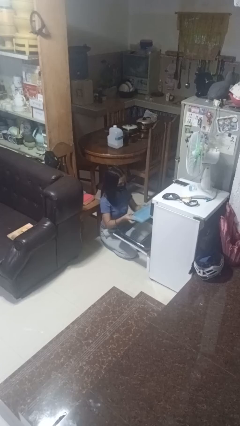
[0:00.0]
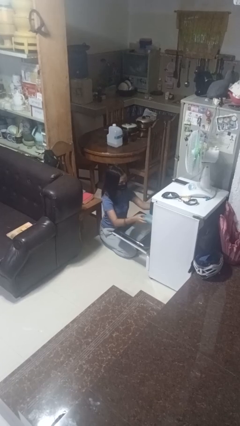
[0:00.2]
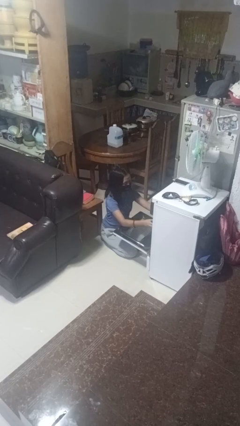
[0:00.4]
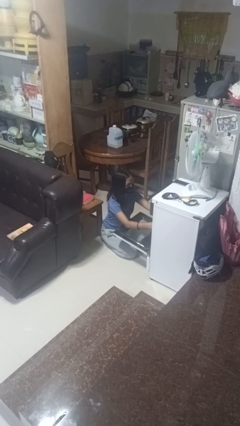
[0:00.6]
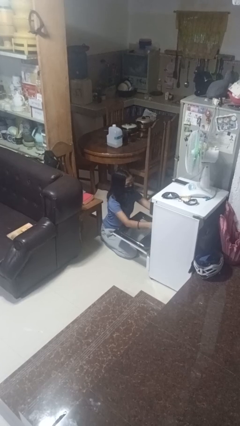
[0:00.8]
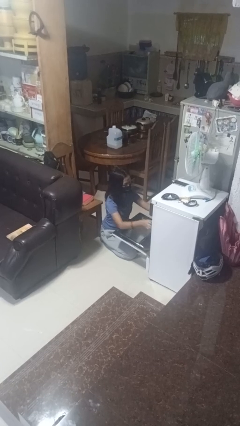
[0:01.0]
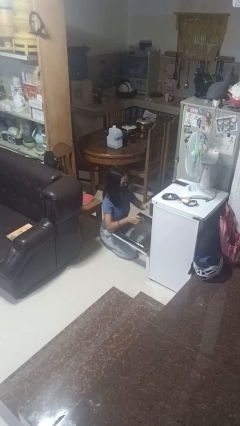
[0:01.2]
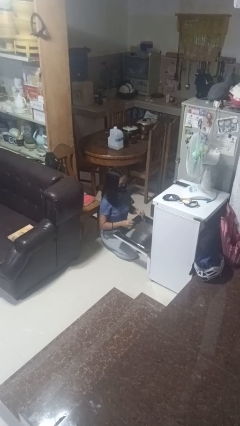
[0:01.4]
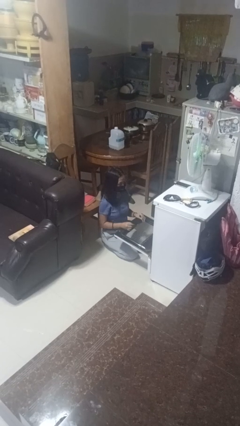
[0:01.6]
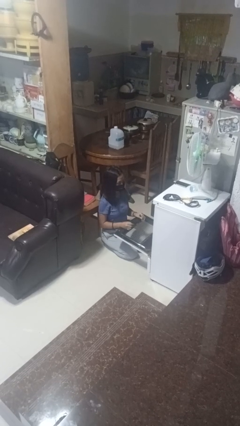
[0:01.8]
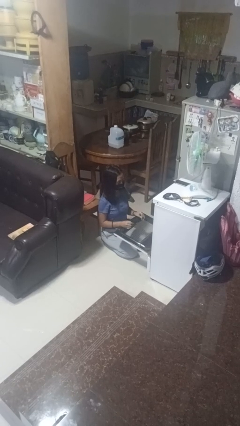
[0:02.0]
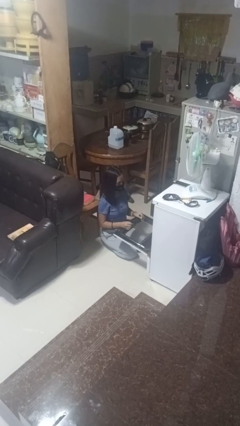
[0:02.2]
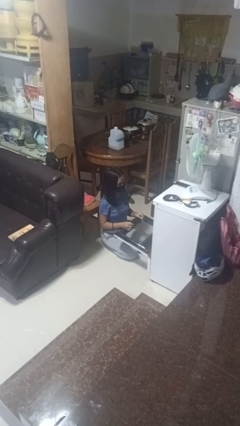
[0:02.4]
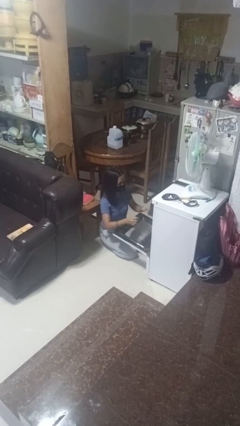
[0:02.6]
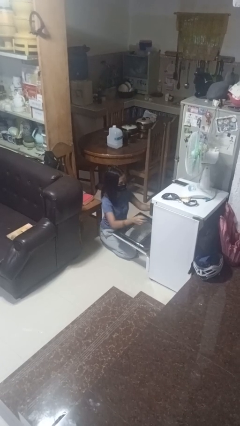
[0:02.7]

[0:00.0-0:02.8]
person puts object into oven

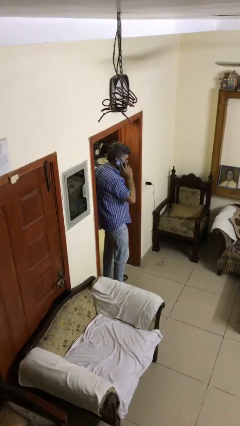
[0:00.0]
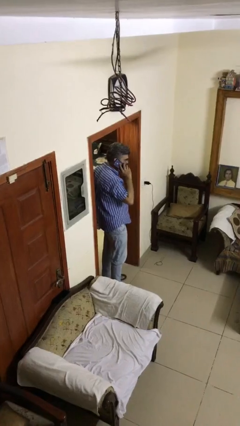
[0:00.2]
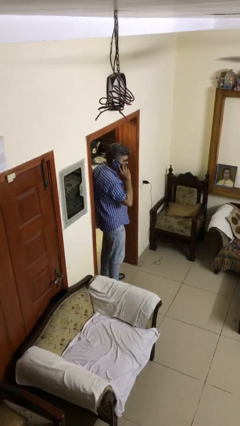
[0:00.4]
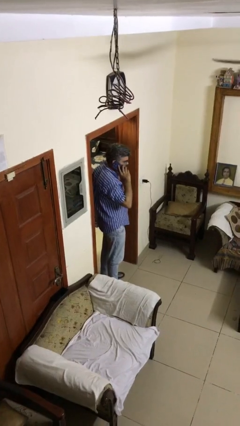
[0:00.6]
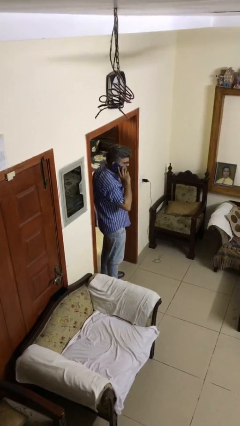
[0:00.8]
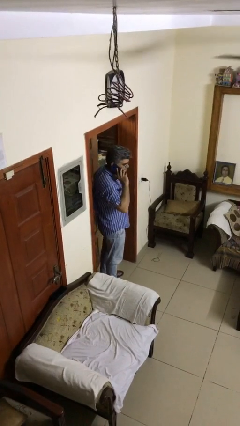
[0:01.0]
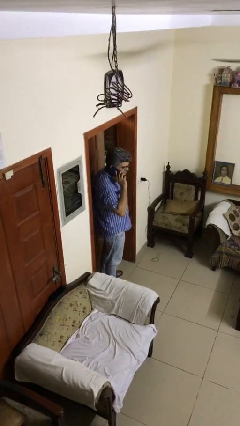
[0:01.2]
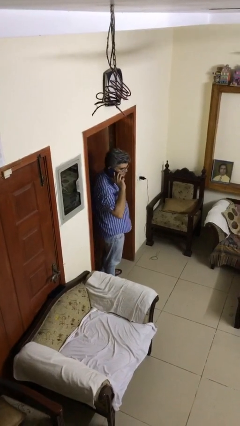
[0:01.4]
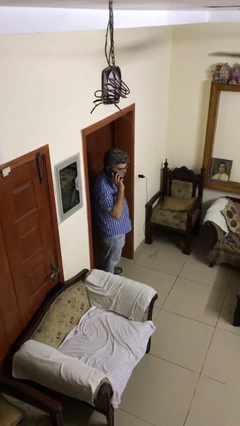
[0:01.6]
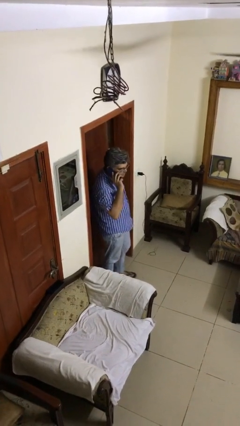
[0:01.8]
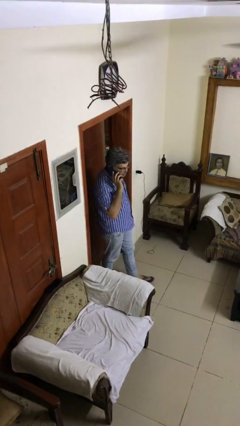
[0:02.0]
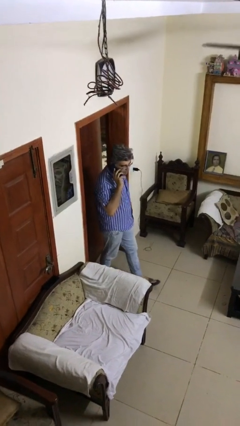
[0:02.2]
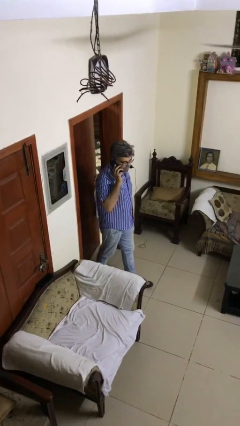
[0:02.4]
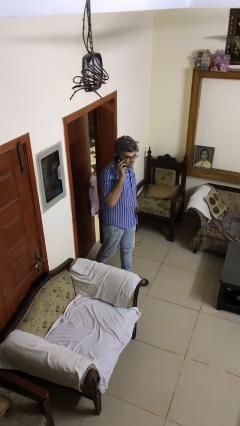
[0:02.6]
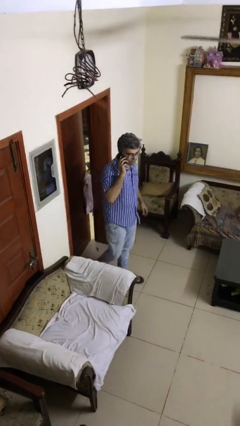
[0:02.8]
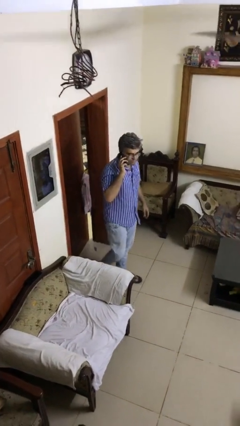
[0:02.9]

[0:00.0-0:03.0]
person closes facility door

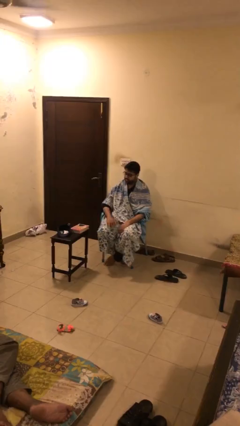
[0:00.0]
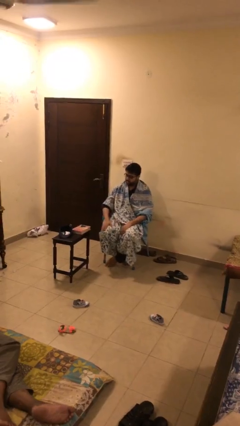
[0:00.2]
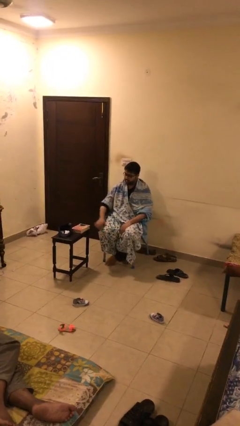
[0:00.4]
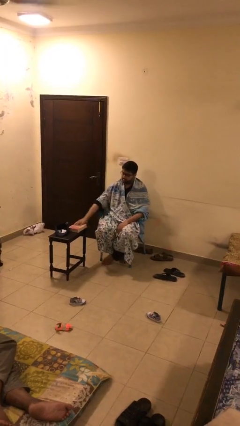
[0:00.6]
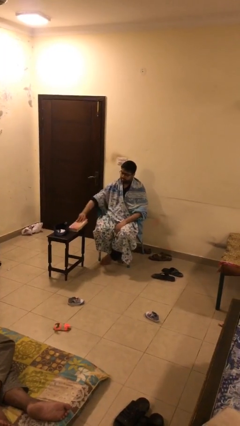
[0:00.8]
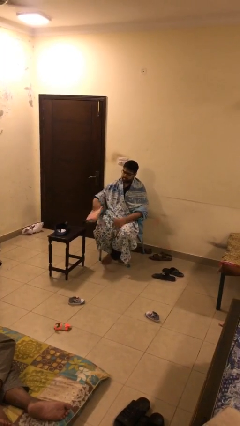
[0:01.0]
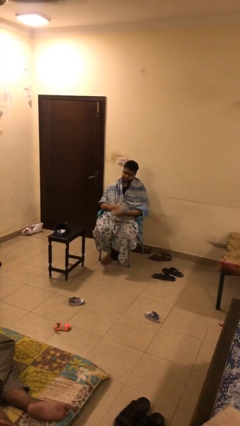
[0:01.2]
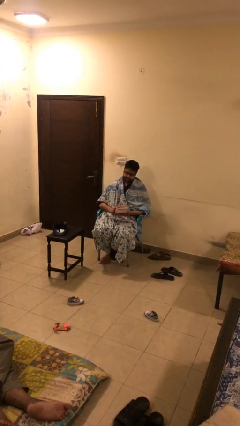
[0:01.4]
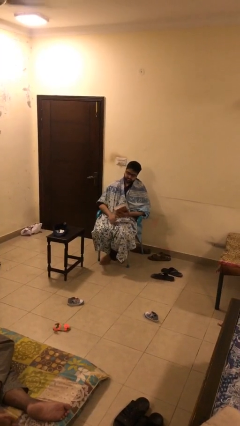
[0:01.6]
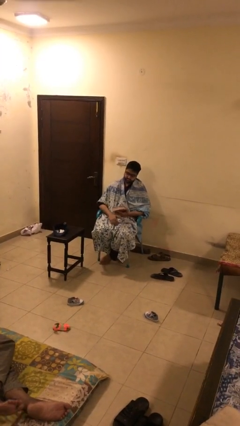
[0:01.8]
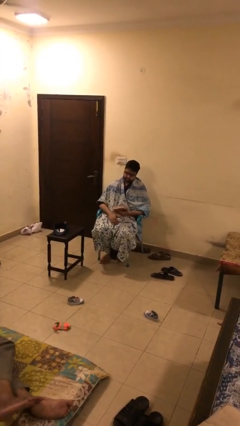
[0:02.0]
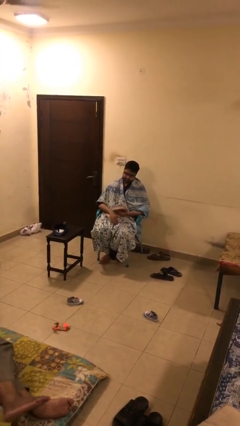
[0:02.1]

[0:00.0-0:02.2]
person picks up object from table

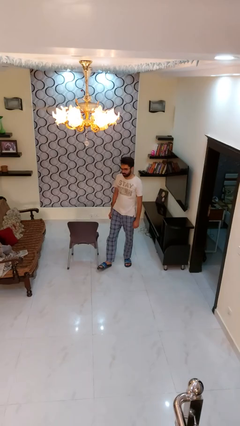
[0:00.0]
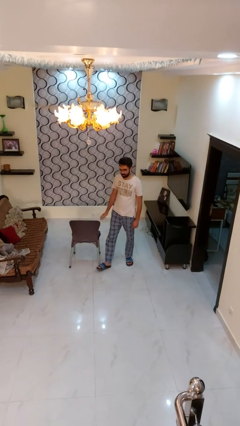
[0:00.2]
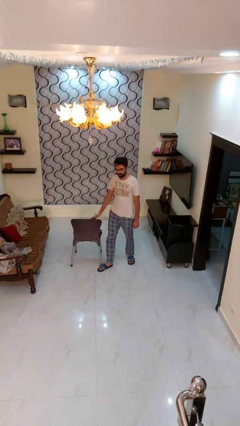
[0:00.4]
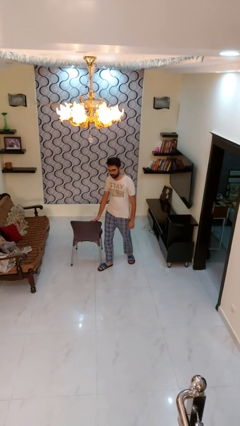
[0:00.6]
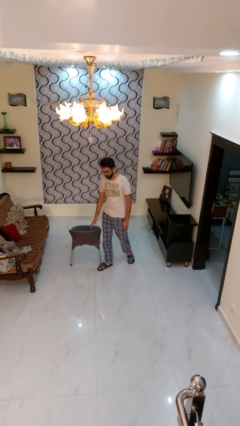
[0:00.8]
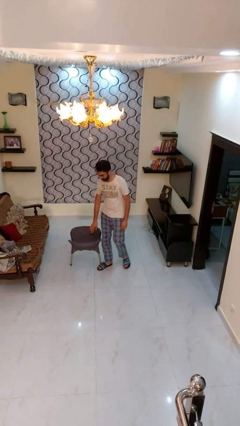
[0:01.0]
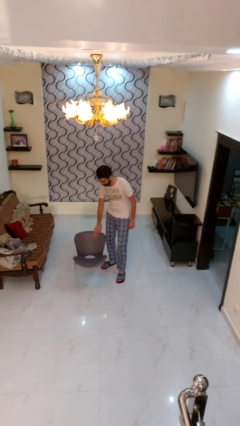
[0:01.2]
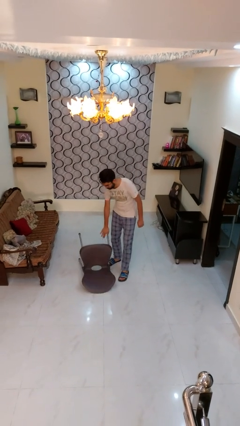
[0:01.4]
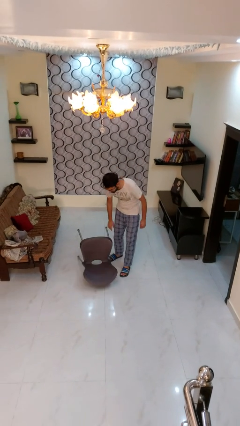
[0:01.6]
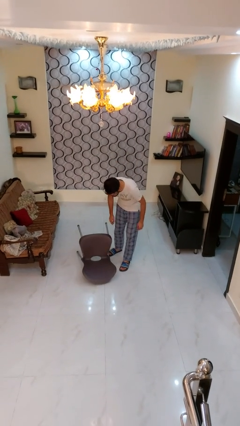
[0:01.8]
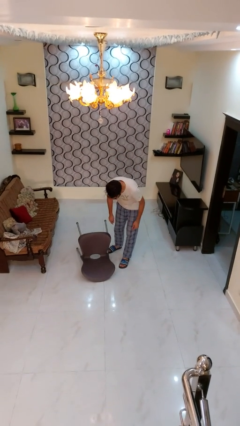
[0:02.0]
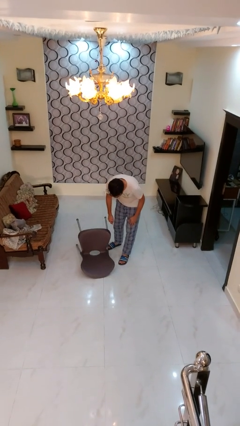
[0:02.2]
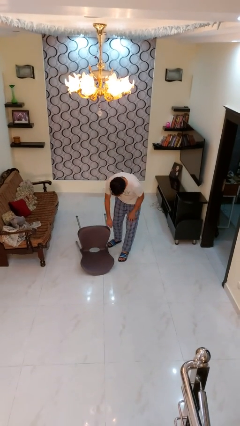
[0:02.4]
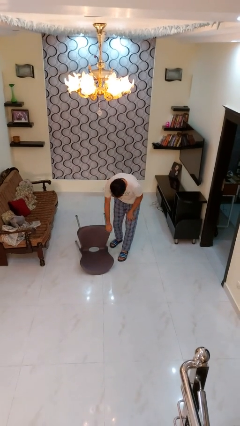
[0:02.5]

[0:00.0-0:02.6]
person knocks over furniture

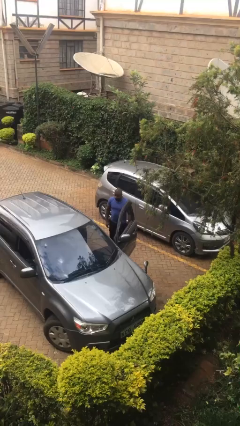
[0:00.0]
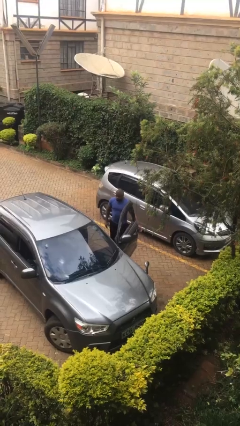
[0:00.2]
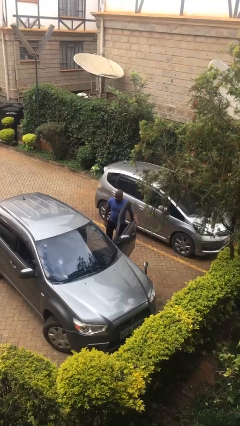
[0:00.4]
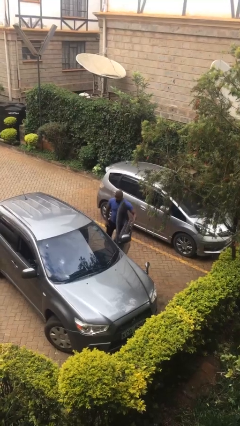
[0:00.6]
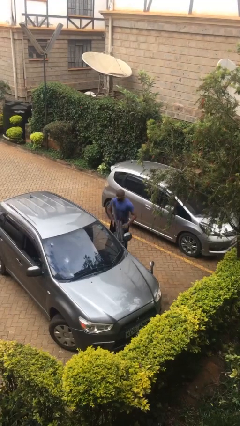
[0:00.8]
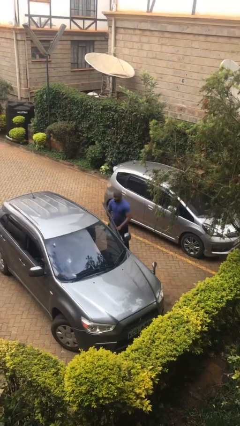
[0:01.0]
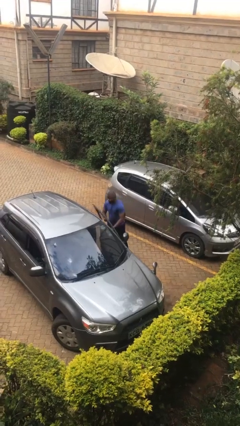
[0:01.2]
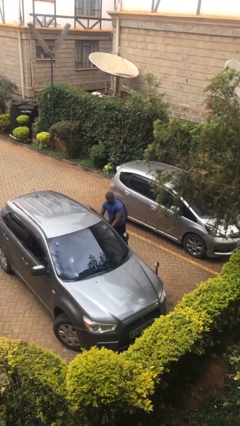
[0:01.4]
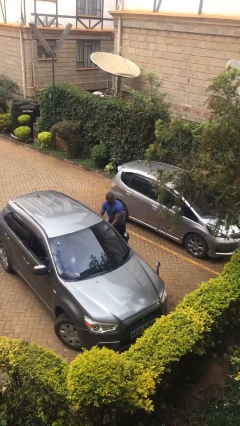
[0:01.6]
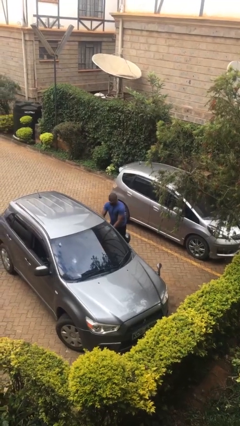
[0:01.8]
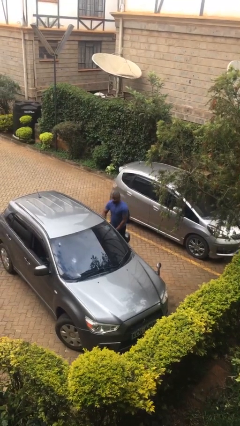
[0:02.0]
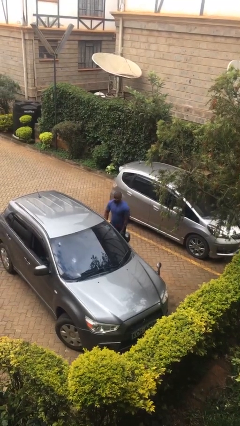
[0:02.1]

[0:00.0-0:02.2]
person closes car door

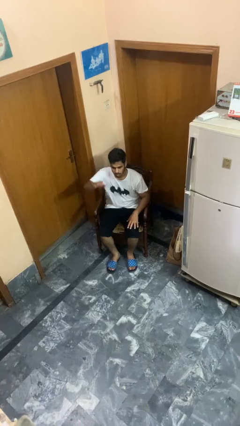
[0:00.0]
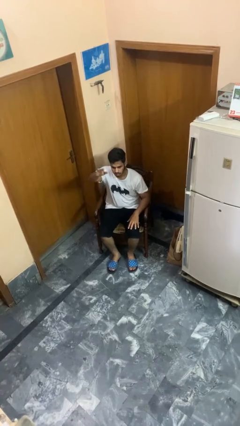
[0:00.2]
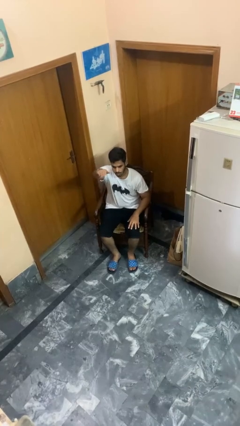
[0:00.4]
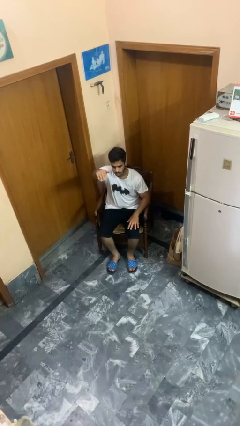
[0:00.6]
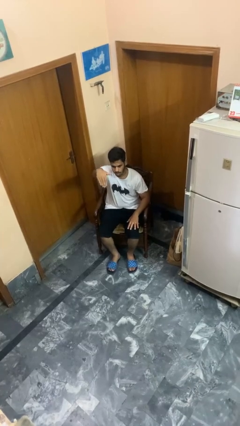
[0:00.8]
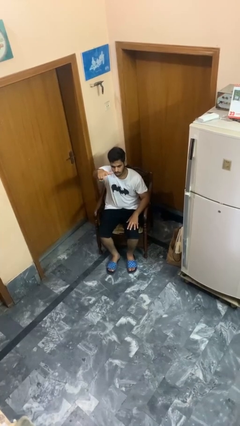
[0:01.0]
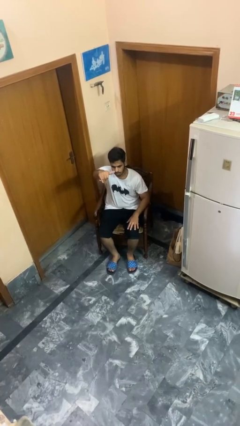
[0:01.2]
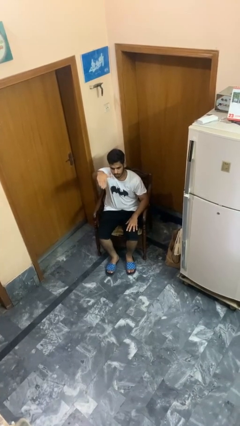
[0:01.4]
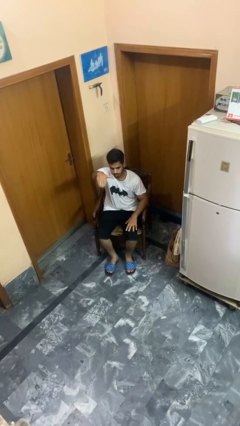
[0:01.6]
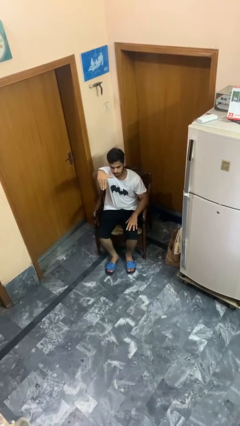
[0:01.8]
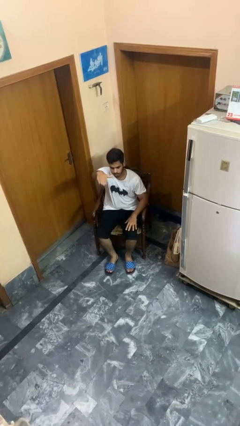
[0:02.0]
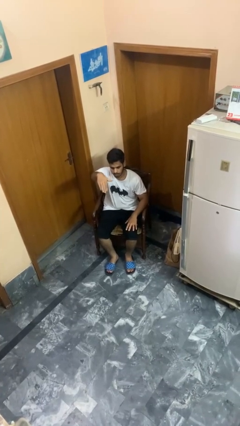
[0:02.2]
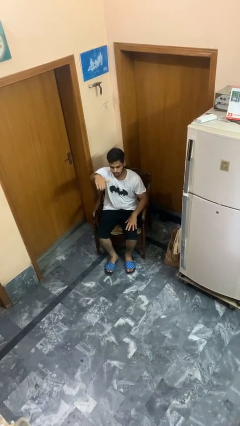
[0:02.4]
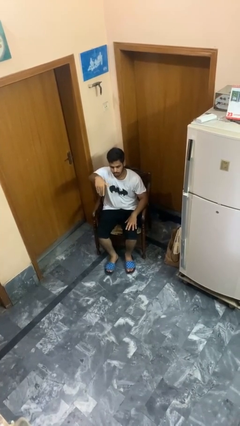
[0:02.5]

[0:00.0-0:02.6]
person gestures come here

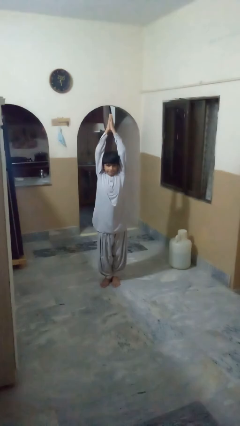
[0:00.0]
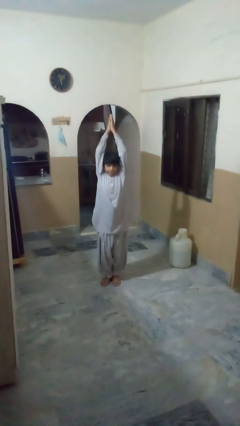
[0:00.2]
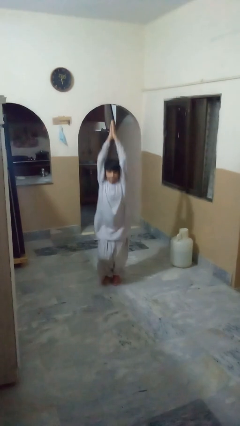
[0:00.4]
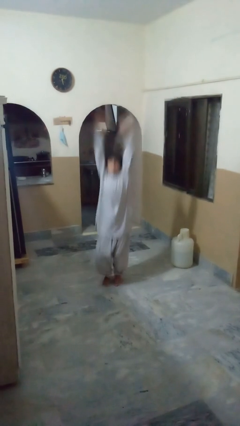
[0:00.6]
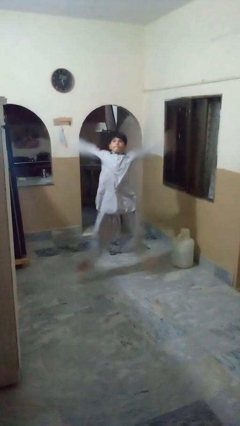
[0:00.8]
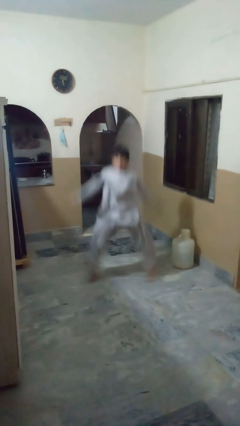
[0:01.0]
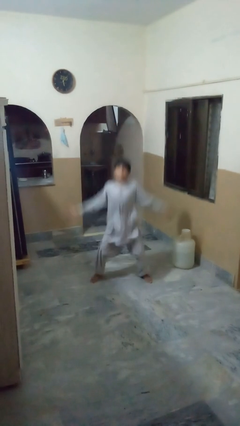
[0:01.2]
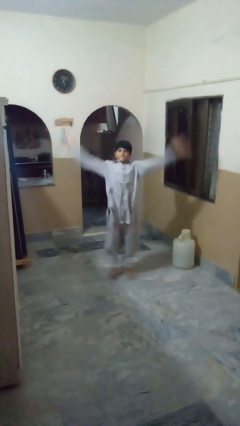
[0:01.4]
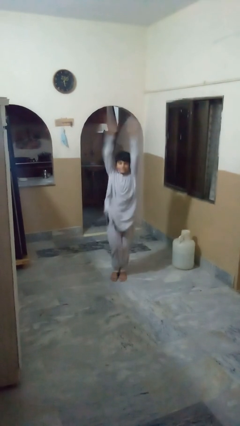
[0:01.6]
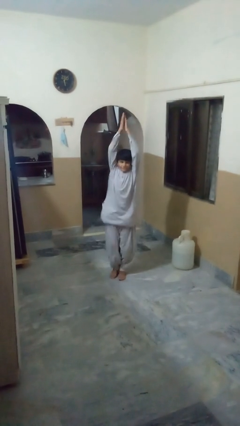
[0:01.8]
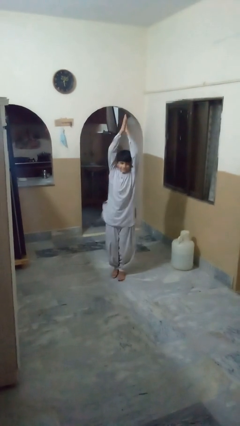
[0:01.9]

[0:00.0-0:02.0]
person exercises with jumping jacks
